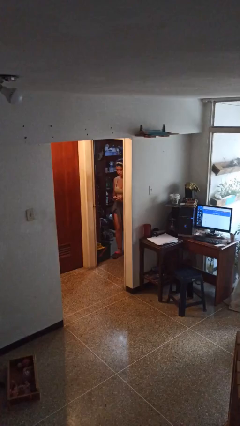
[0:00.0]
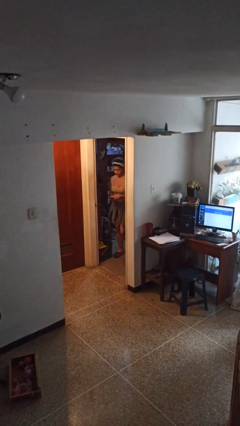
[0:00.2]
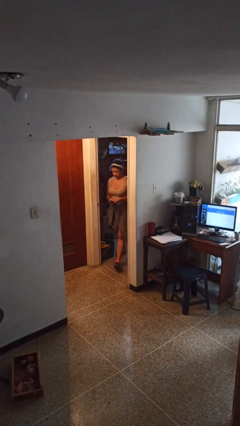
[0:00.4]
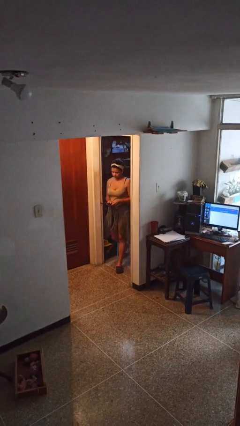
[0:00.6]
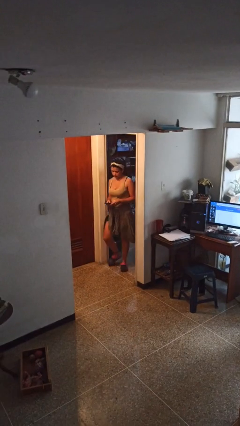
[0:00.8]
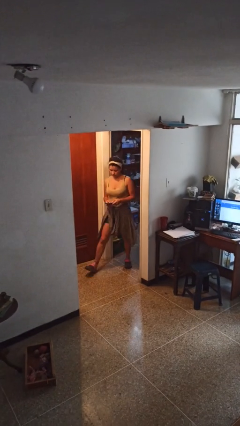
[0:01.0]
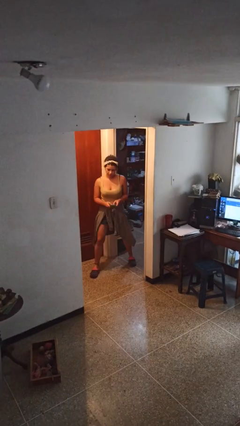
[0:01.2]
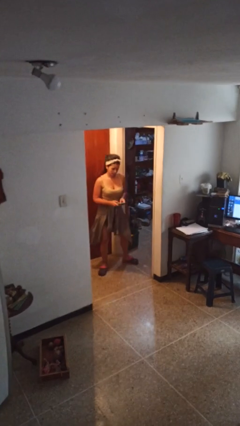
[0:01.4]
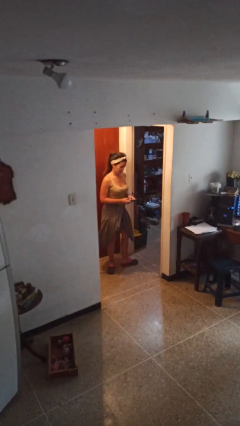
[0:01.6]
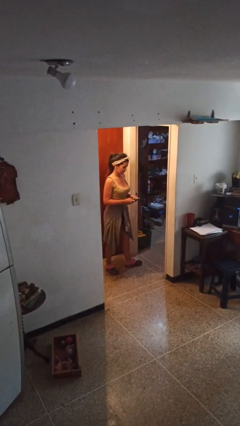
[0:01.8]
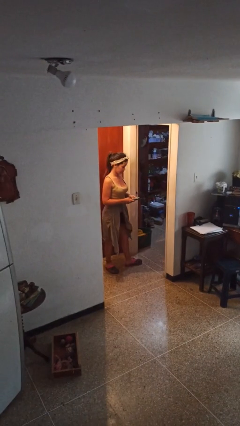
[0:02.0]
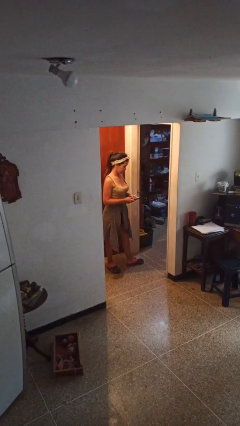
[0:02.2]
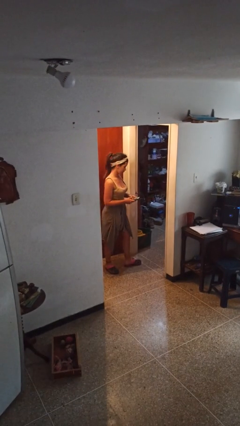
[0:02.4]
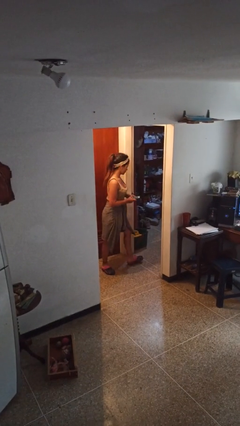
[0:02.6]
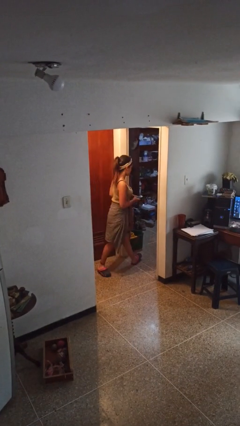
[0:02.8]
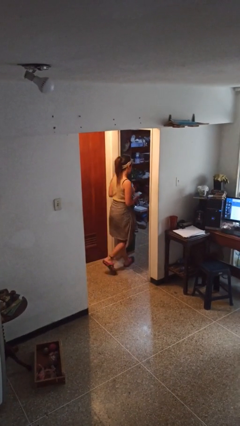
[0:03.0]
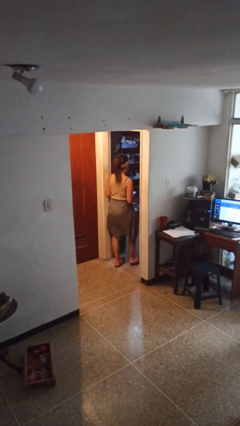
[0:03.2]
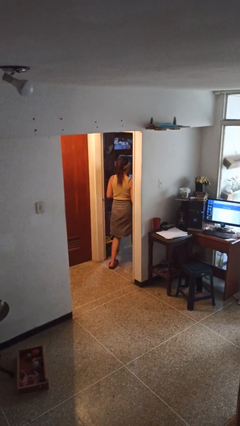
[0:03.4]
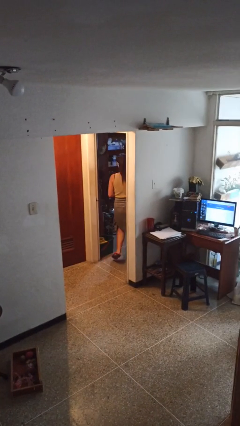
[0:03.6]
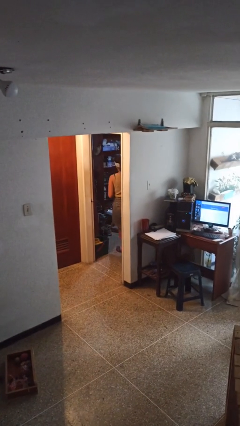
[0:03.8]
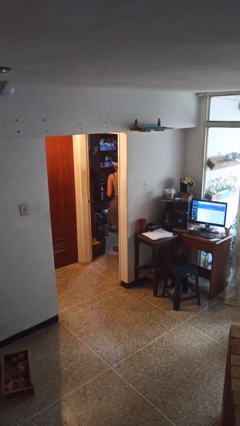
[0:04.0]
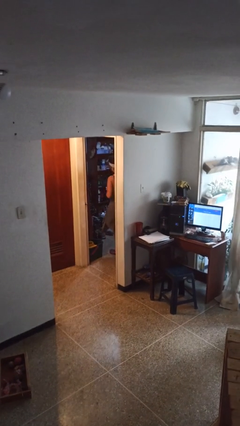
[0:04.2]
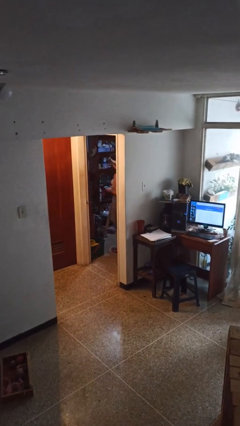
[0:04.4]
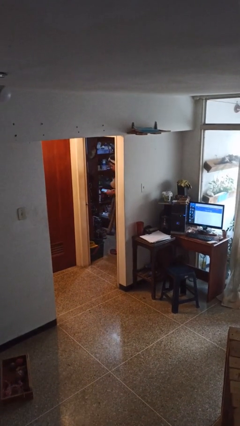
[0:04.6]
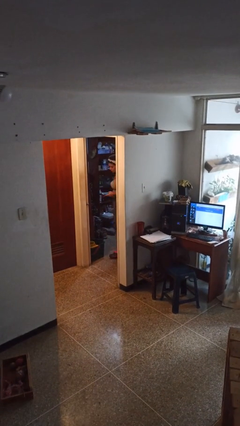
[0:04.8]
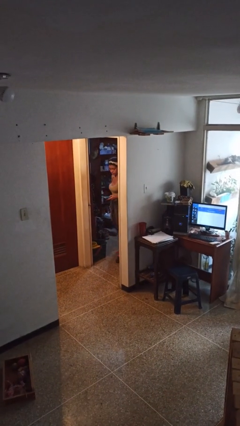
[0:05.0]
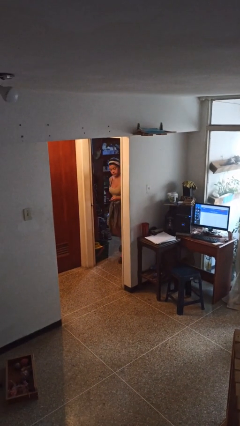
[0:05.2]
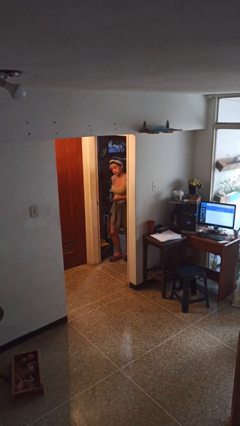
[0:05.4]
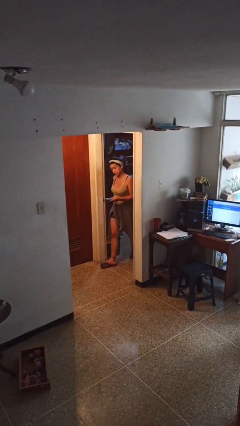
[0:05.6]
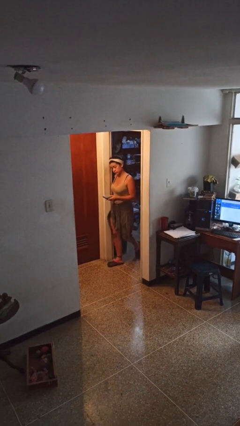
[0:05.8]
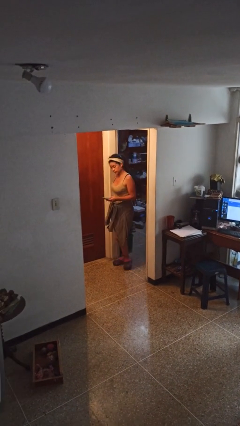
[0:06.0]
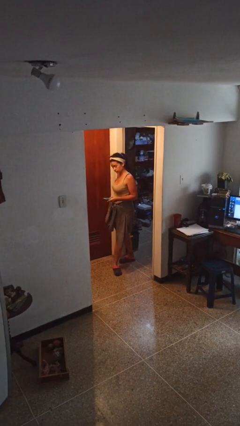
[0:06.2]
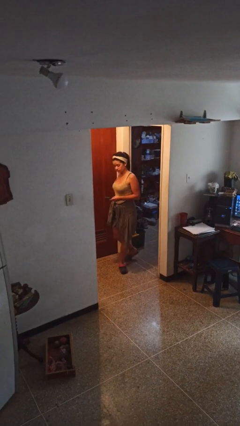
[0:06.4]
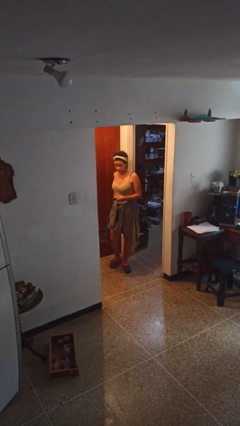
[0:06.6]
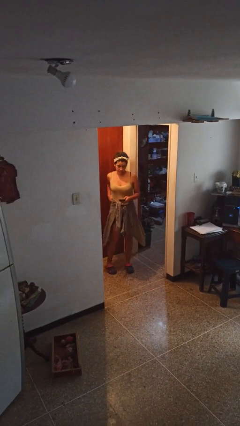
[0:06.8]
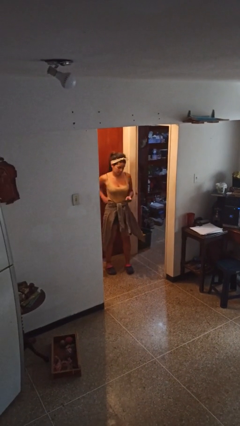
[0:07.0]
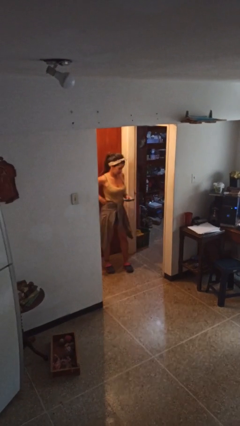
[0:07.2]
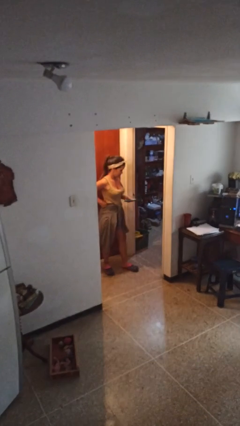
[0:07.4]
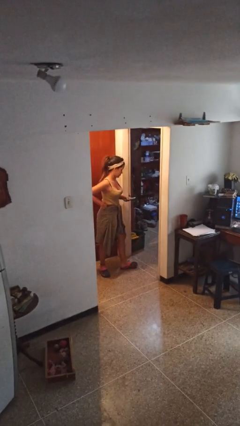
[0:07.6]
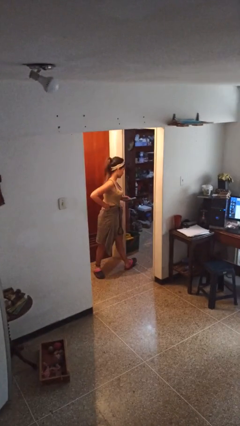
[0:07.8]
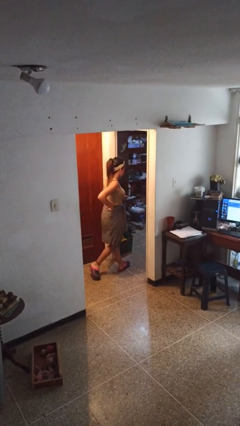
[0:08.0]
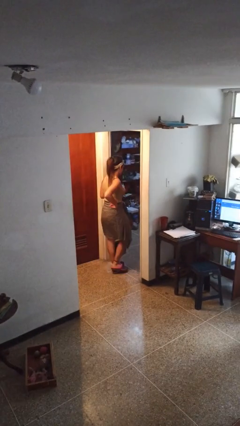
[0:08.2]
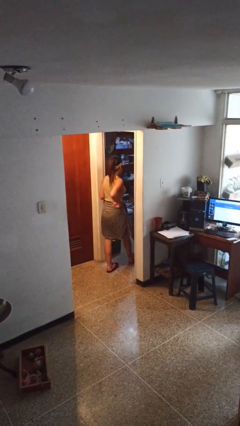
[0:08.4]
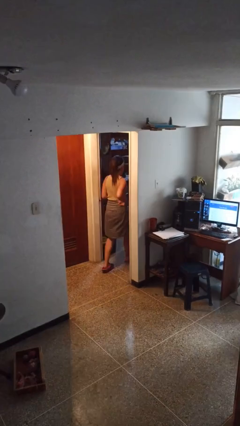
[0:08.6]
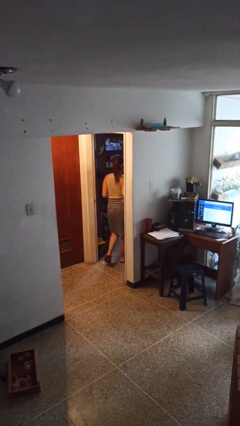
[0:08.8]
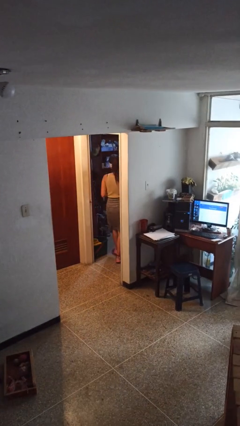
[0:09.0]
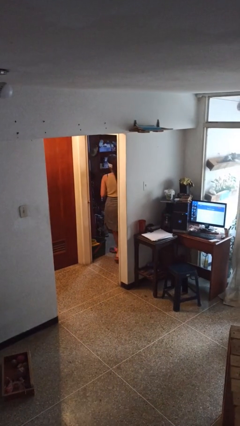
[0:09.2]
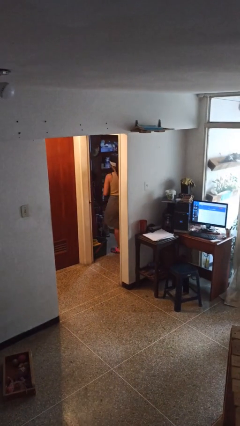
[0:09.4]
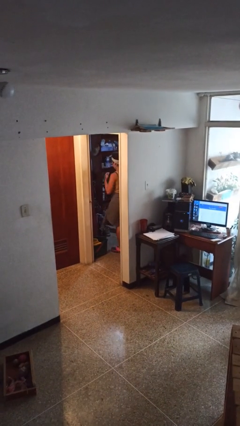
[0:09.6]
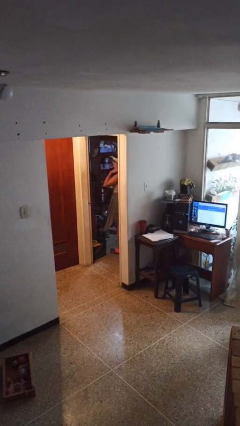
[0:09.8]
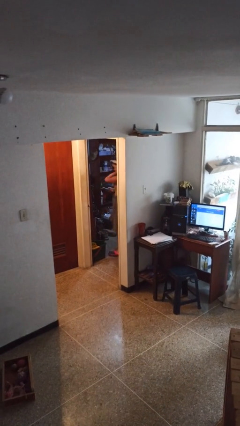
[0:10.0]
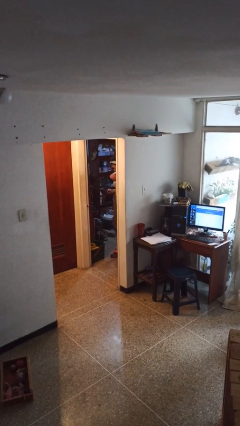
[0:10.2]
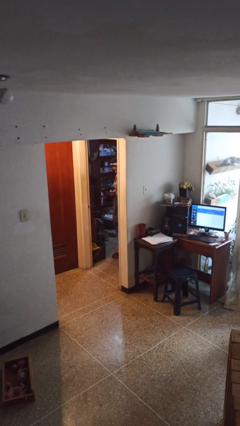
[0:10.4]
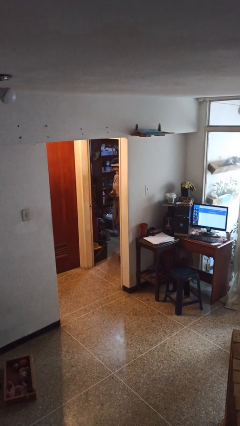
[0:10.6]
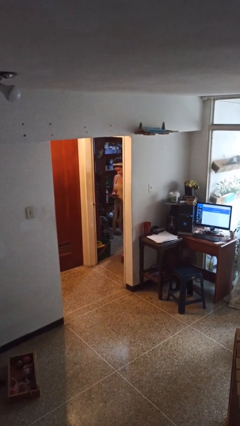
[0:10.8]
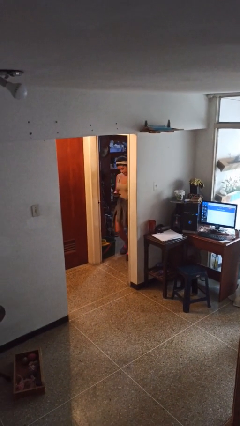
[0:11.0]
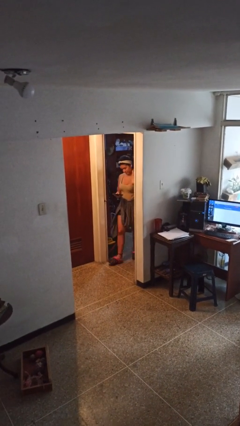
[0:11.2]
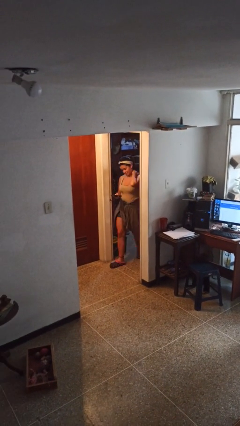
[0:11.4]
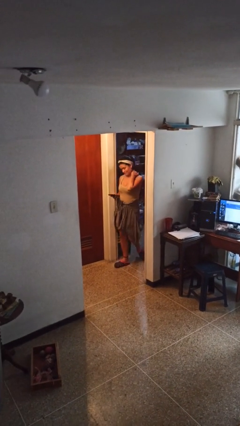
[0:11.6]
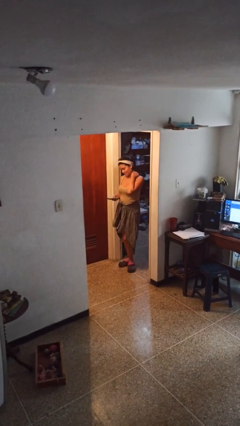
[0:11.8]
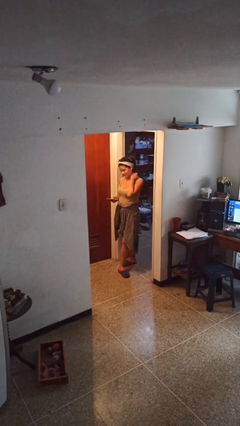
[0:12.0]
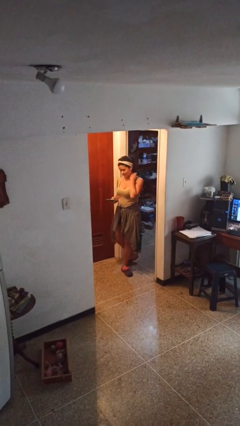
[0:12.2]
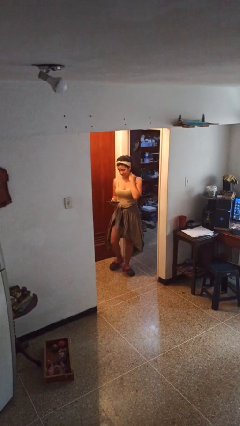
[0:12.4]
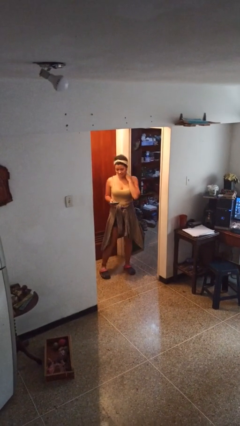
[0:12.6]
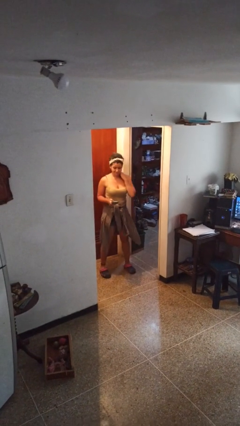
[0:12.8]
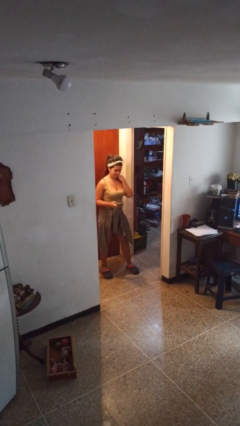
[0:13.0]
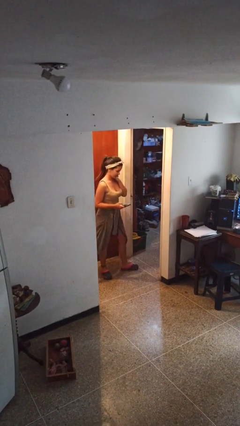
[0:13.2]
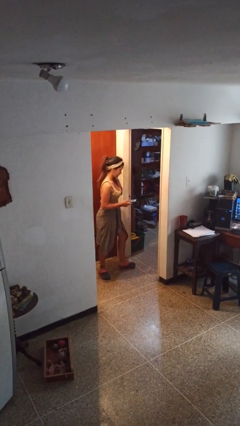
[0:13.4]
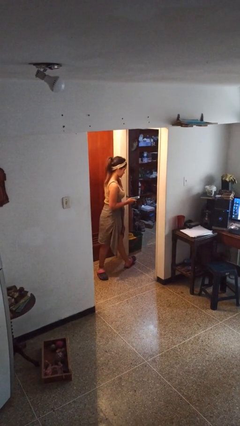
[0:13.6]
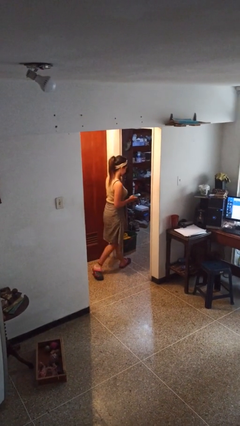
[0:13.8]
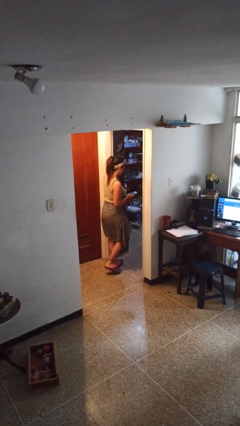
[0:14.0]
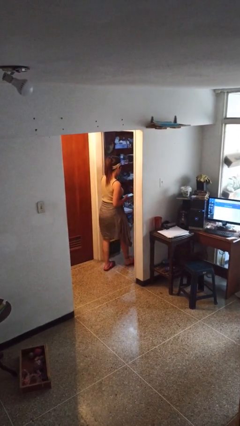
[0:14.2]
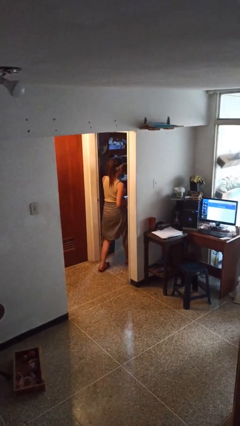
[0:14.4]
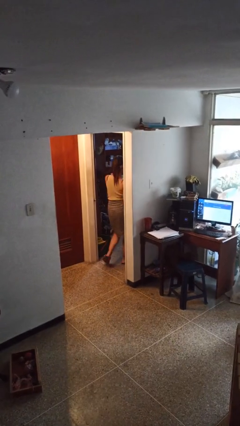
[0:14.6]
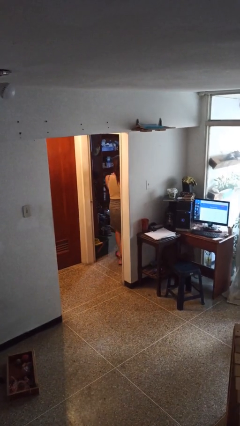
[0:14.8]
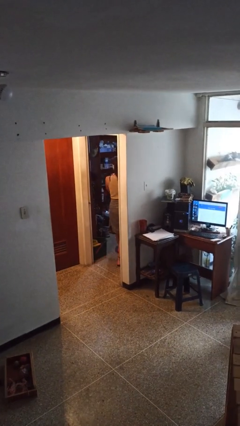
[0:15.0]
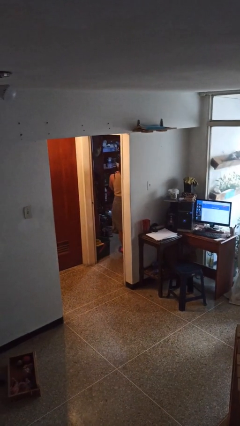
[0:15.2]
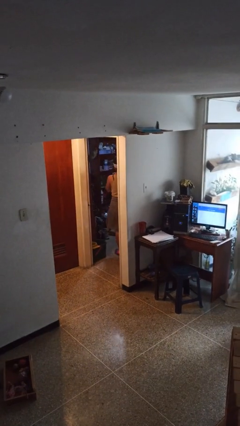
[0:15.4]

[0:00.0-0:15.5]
person texts on phone

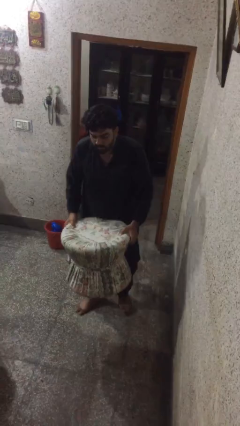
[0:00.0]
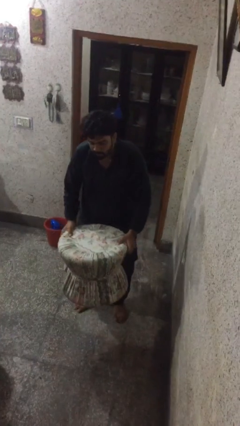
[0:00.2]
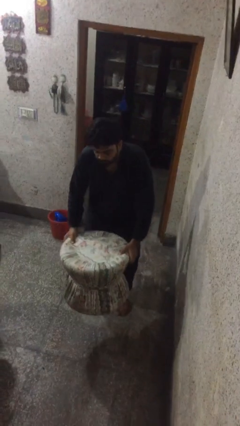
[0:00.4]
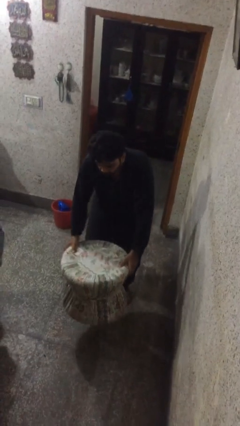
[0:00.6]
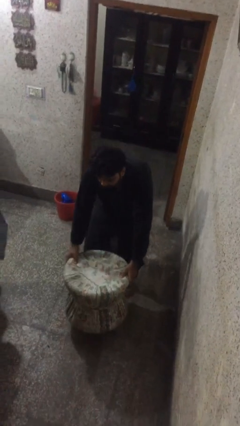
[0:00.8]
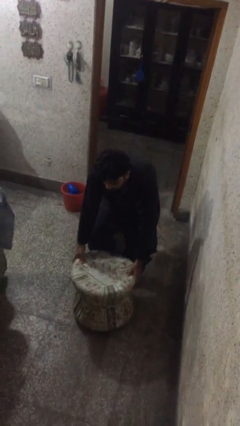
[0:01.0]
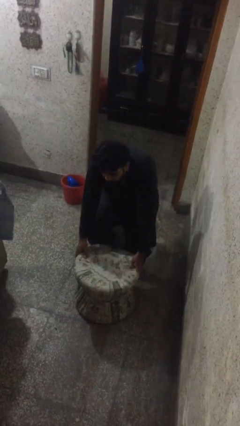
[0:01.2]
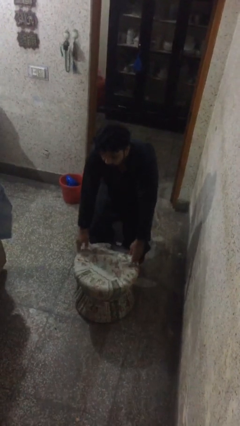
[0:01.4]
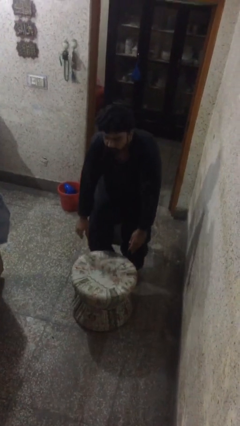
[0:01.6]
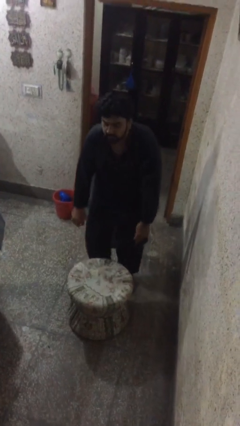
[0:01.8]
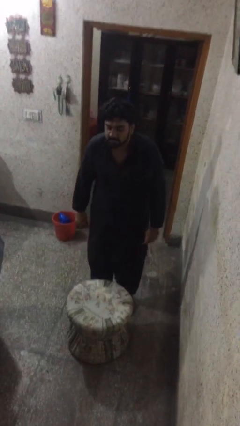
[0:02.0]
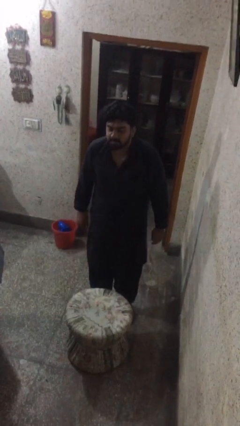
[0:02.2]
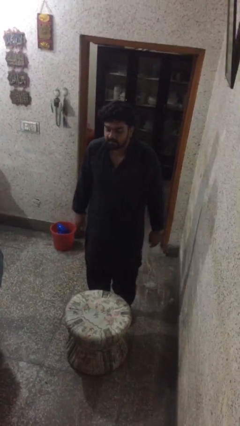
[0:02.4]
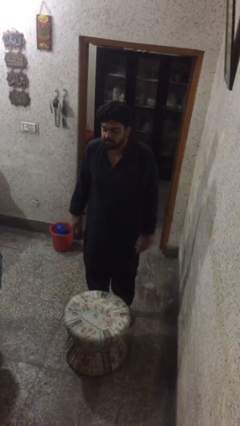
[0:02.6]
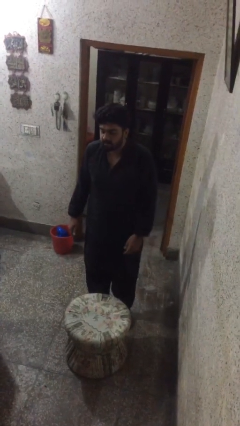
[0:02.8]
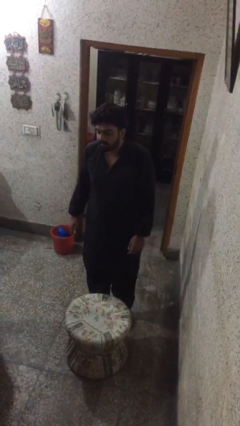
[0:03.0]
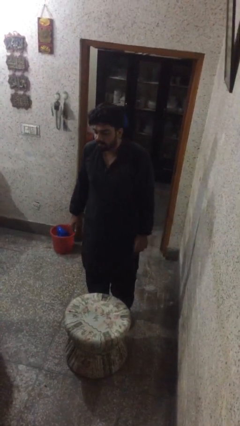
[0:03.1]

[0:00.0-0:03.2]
person puts down object on floor
